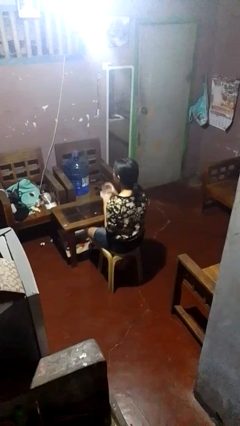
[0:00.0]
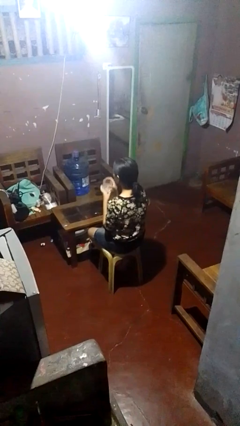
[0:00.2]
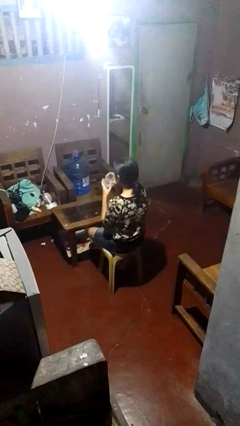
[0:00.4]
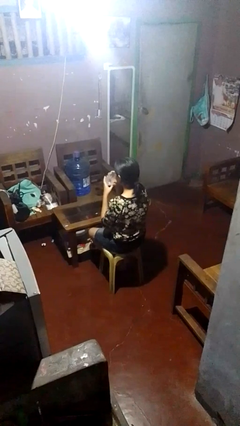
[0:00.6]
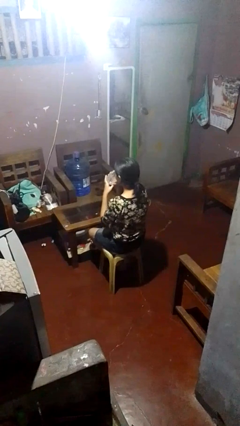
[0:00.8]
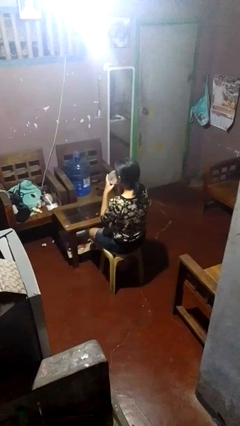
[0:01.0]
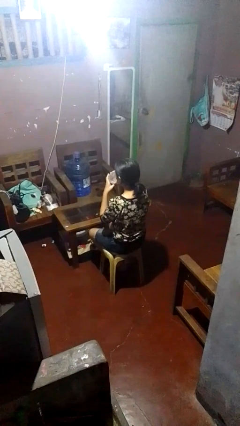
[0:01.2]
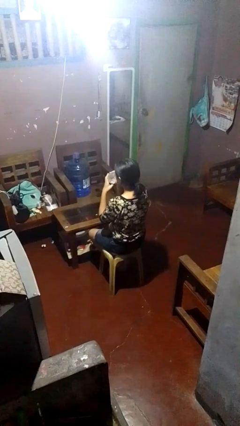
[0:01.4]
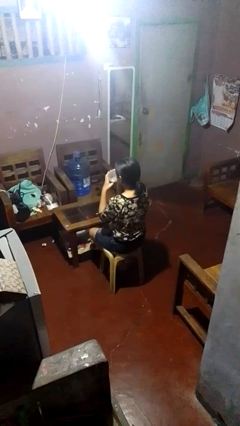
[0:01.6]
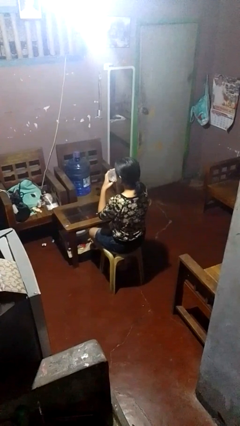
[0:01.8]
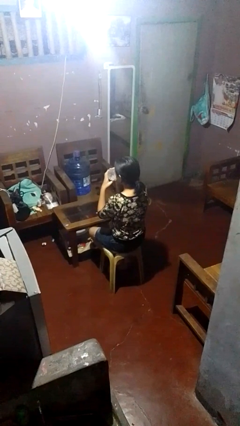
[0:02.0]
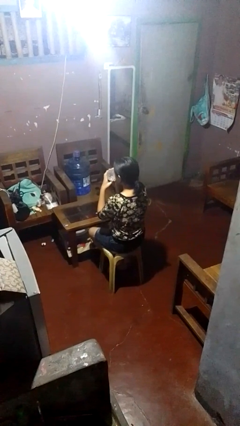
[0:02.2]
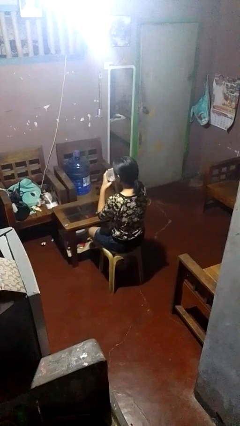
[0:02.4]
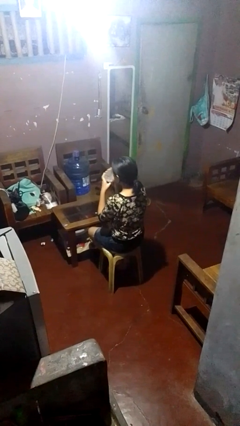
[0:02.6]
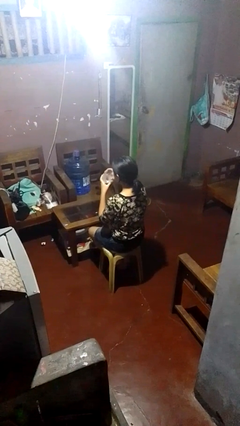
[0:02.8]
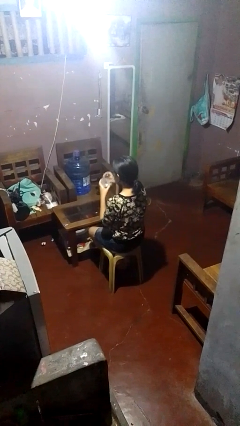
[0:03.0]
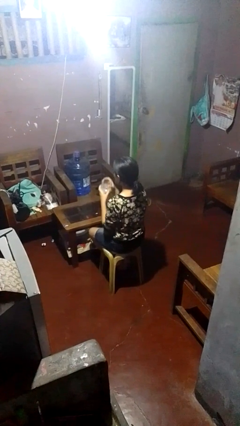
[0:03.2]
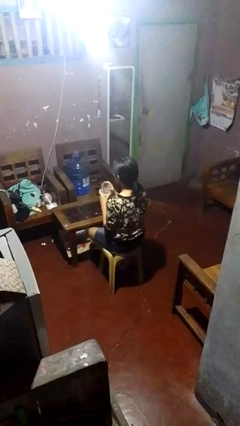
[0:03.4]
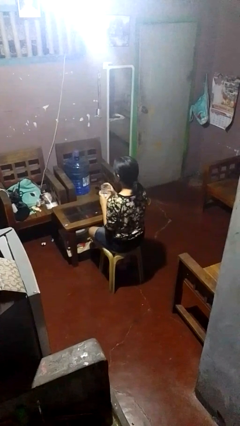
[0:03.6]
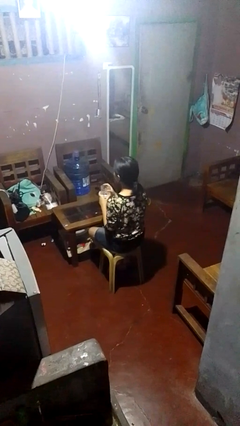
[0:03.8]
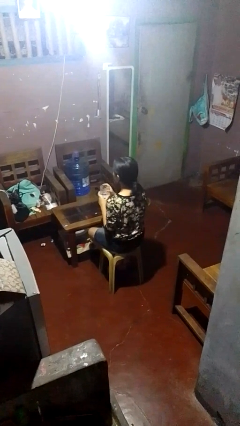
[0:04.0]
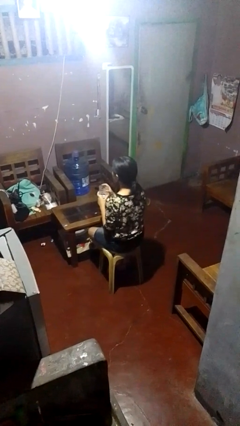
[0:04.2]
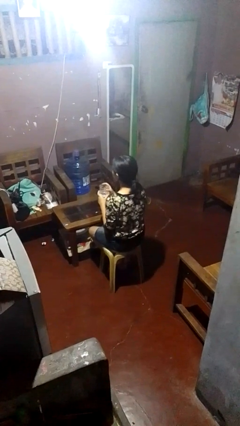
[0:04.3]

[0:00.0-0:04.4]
person drinks from mug

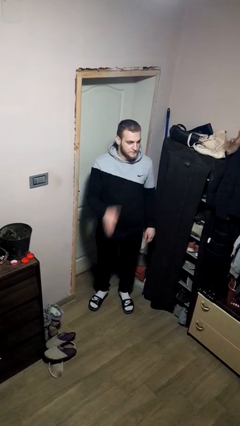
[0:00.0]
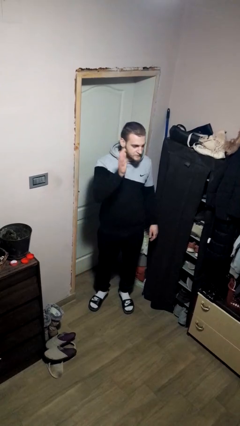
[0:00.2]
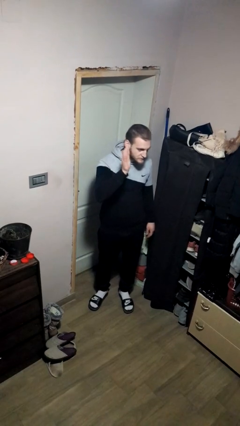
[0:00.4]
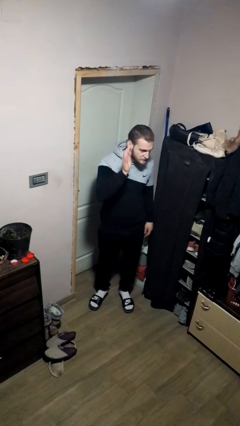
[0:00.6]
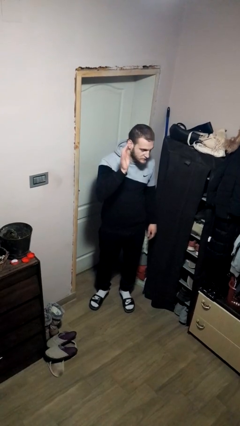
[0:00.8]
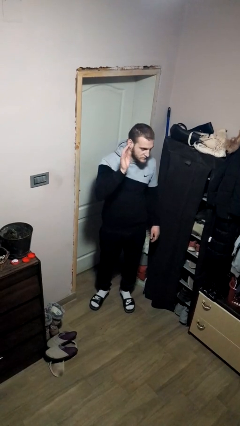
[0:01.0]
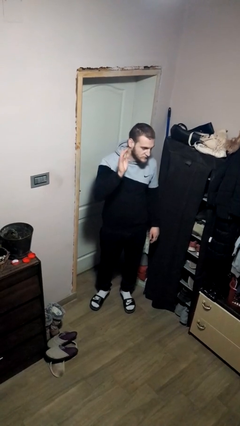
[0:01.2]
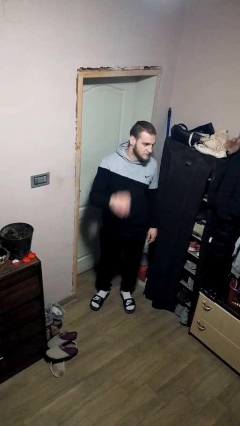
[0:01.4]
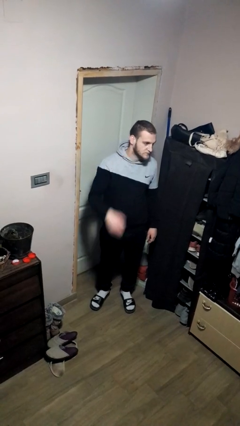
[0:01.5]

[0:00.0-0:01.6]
person waves at person

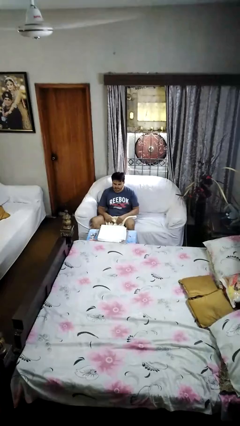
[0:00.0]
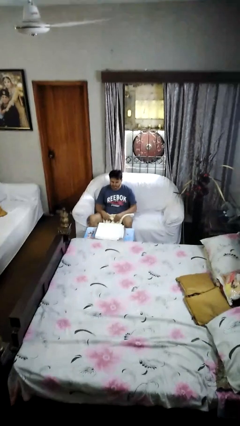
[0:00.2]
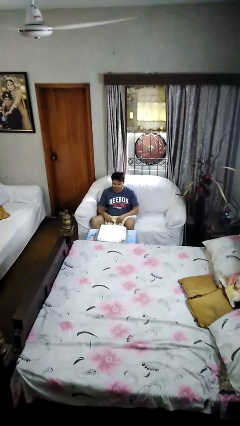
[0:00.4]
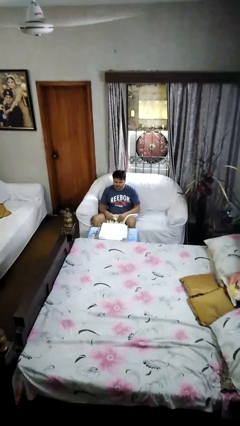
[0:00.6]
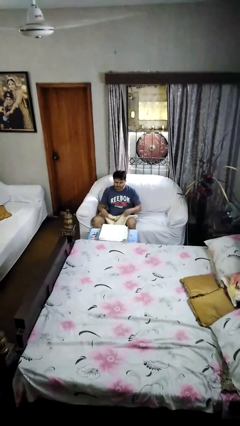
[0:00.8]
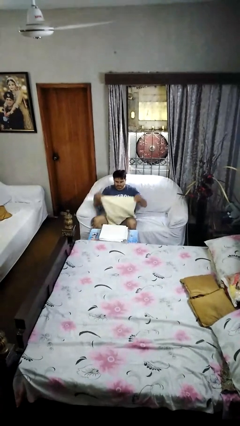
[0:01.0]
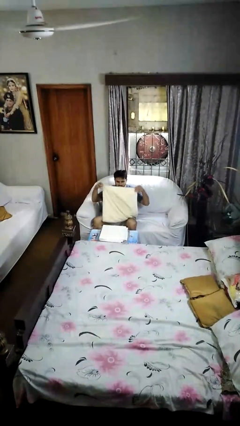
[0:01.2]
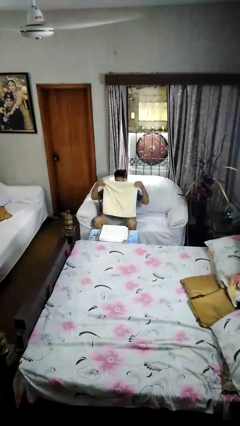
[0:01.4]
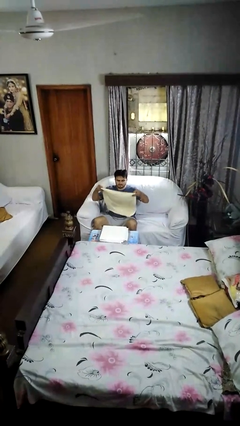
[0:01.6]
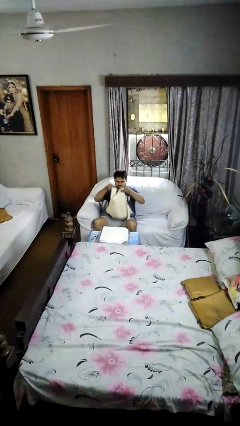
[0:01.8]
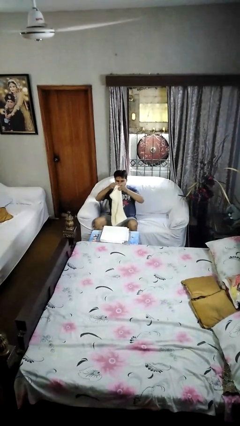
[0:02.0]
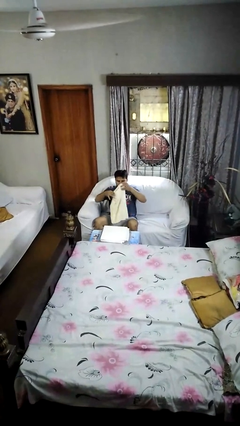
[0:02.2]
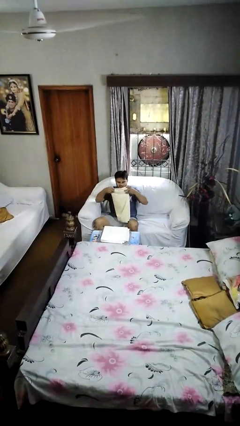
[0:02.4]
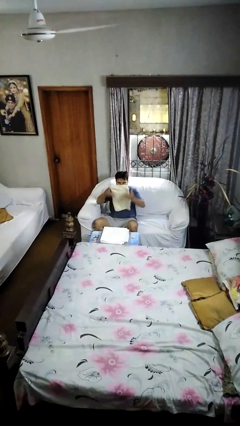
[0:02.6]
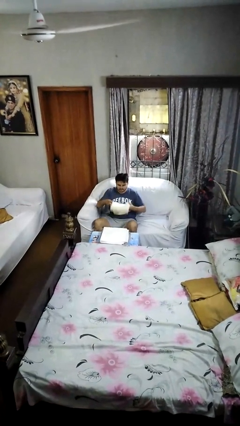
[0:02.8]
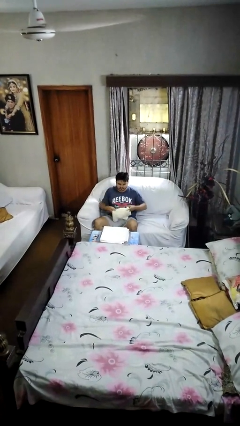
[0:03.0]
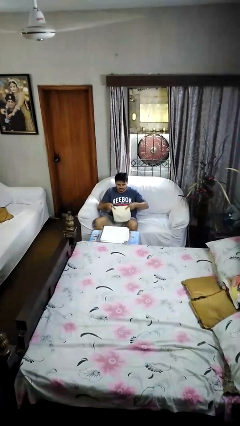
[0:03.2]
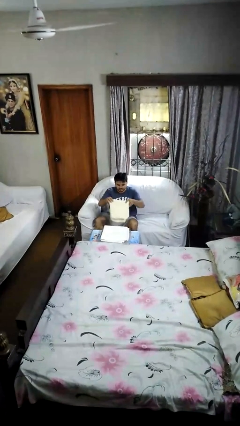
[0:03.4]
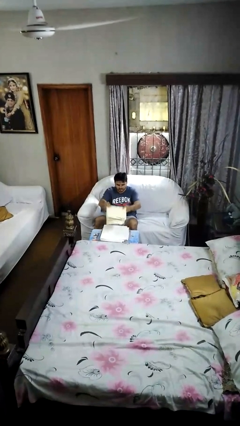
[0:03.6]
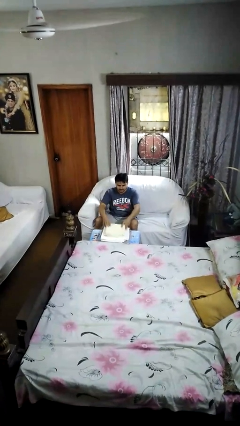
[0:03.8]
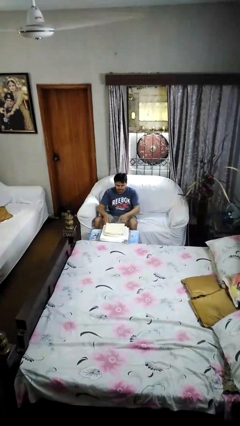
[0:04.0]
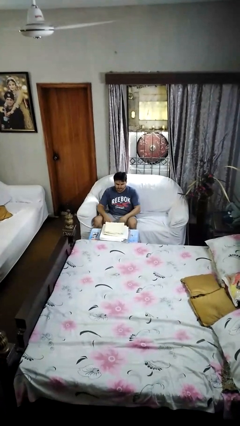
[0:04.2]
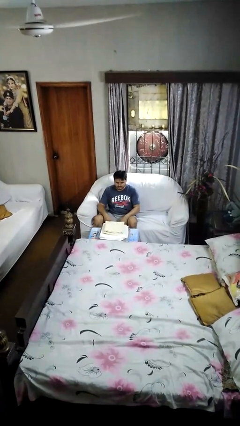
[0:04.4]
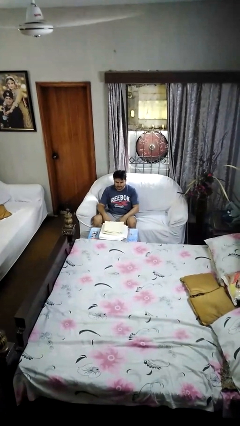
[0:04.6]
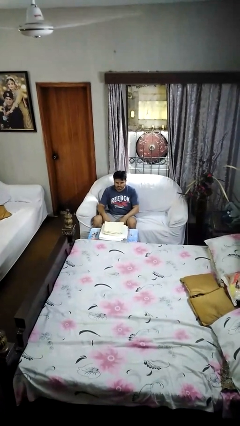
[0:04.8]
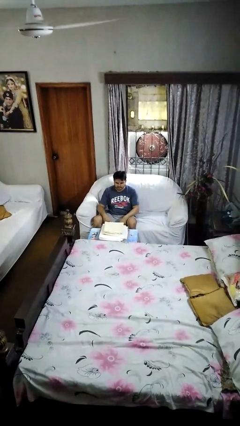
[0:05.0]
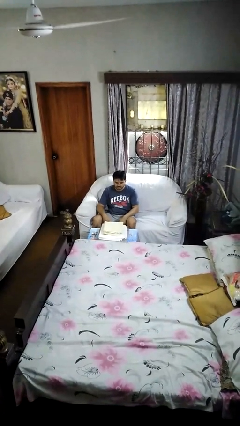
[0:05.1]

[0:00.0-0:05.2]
person folds towel

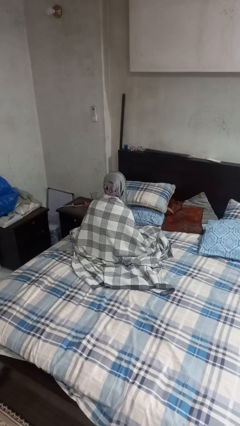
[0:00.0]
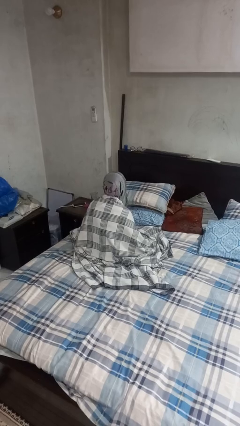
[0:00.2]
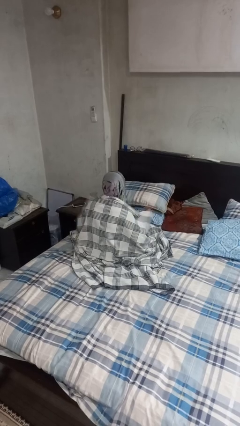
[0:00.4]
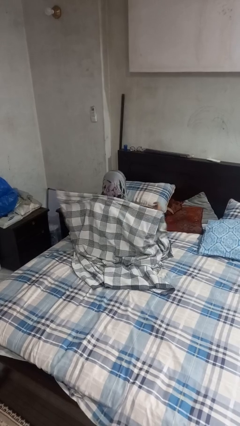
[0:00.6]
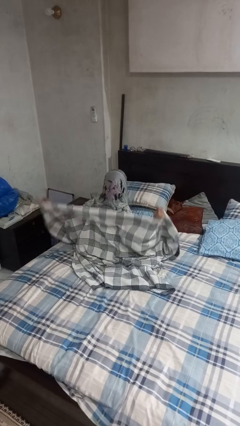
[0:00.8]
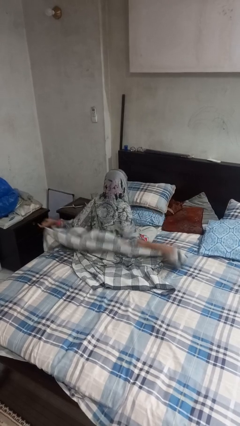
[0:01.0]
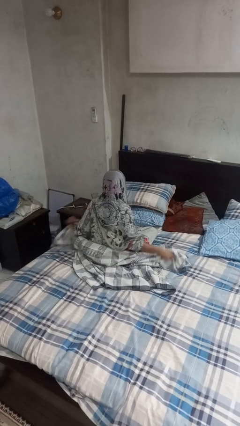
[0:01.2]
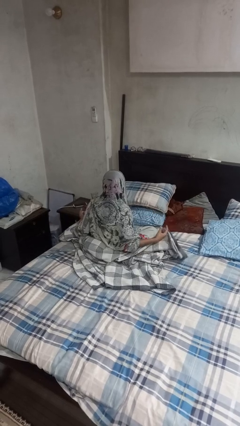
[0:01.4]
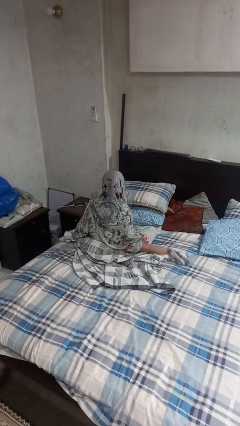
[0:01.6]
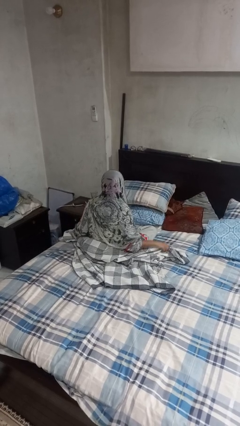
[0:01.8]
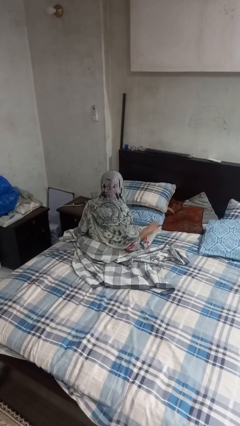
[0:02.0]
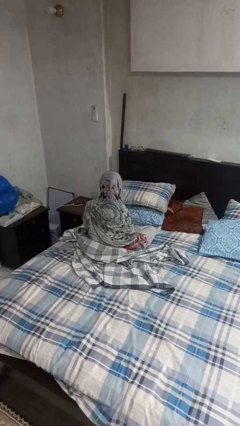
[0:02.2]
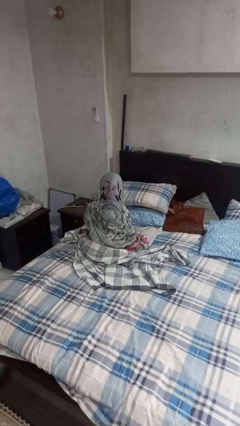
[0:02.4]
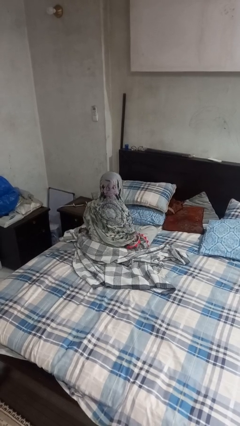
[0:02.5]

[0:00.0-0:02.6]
person uncovers with blanket

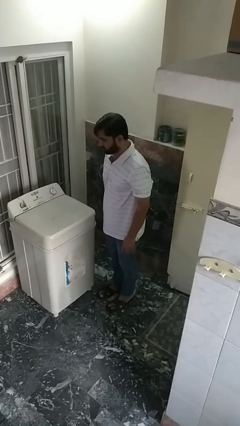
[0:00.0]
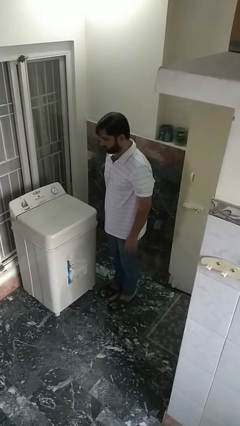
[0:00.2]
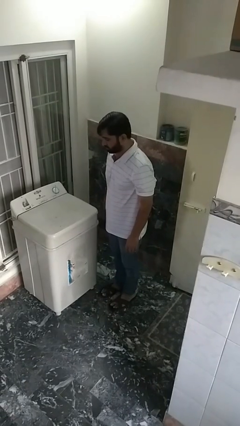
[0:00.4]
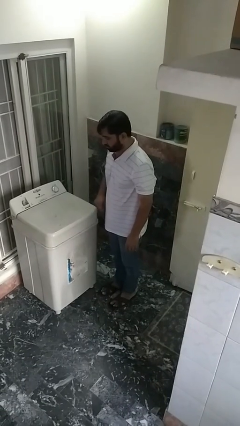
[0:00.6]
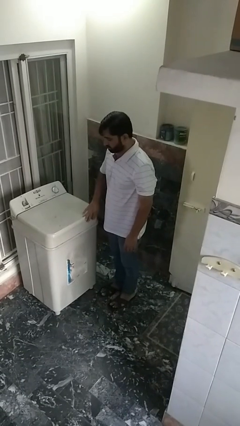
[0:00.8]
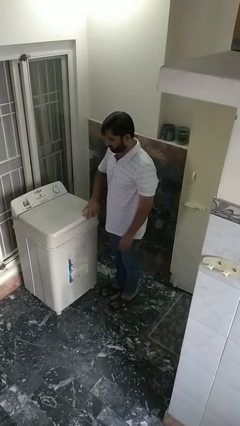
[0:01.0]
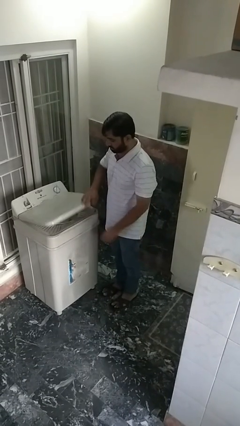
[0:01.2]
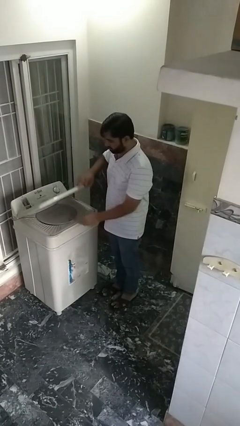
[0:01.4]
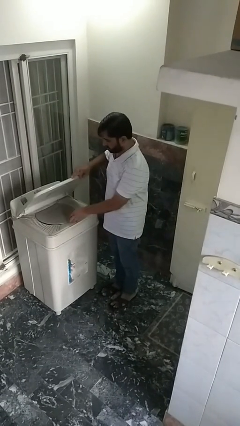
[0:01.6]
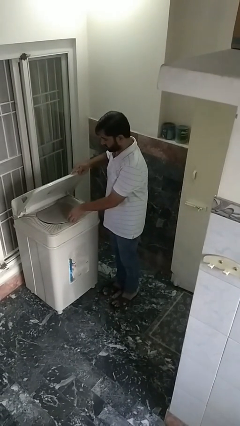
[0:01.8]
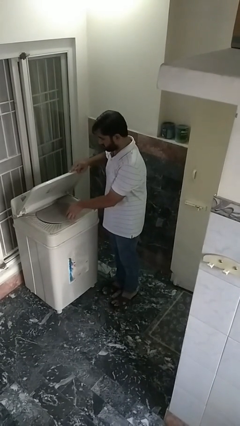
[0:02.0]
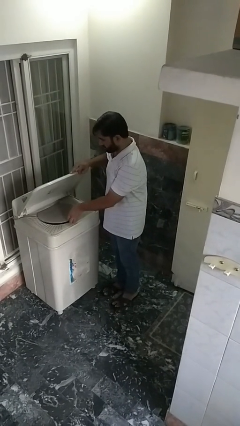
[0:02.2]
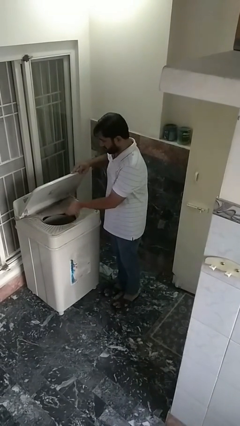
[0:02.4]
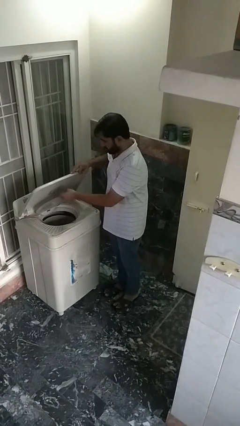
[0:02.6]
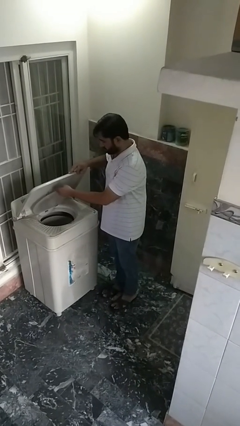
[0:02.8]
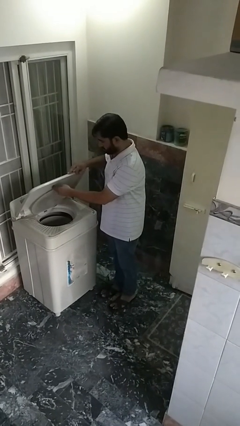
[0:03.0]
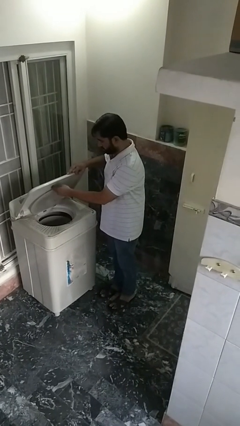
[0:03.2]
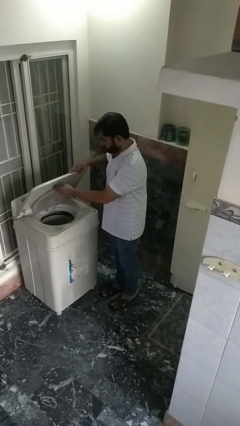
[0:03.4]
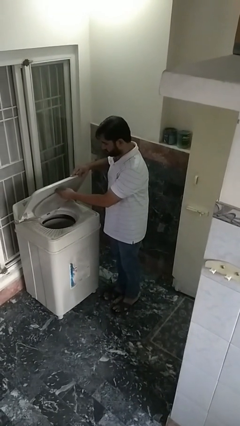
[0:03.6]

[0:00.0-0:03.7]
person opens clothes washer
